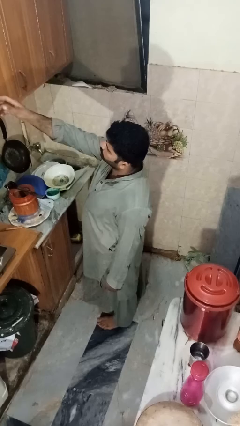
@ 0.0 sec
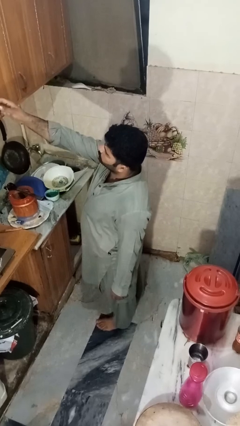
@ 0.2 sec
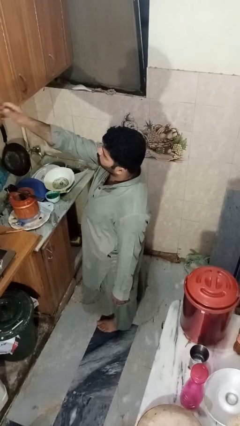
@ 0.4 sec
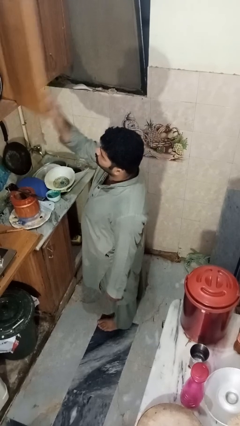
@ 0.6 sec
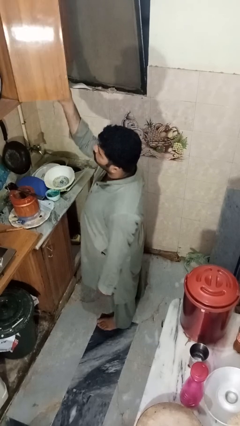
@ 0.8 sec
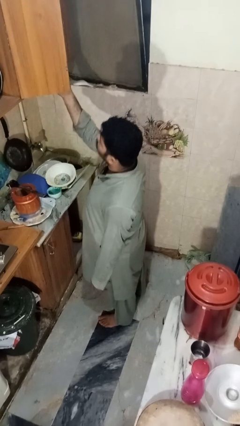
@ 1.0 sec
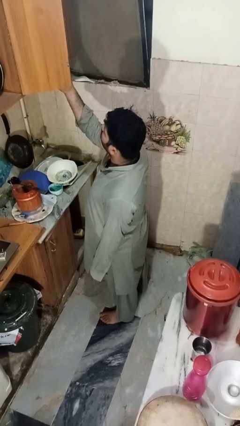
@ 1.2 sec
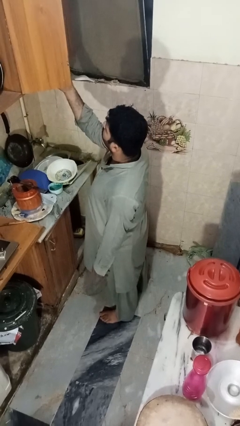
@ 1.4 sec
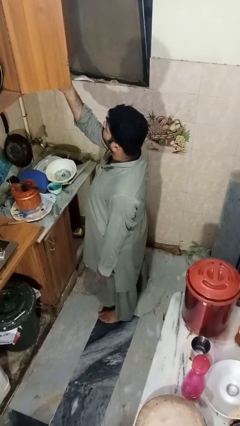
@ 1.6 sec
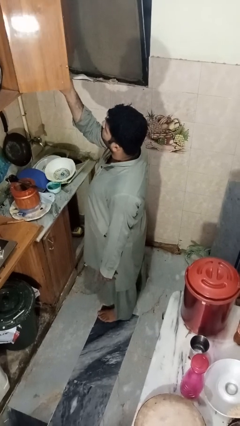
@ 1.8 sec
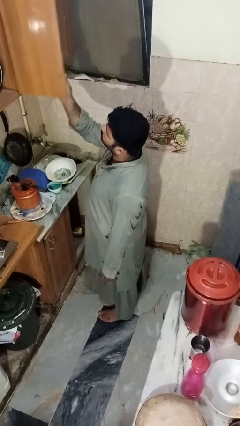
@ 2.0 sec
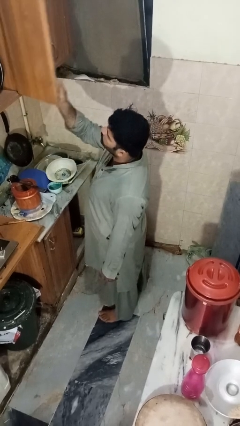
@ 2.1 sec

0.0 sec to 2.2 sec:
person opens cabinet

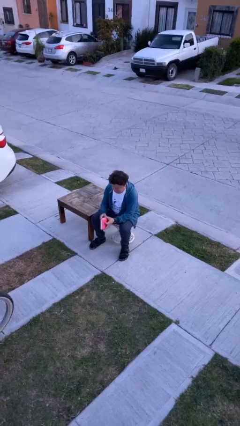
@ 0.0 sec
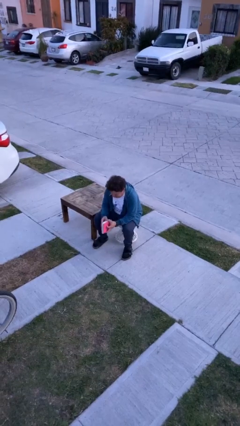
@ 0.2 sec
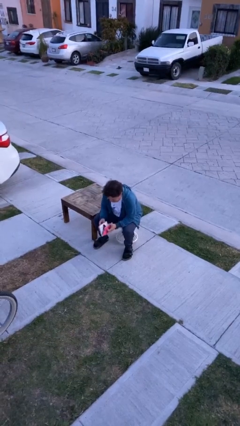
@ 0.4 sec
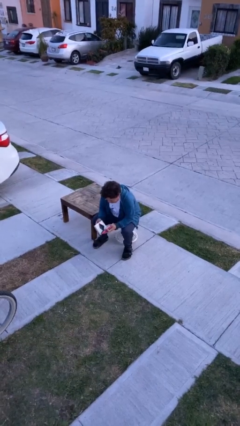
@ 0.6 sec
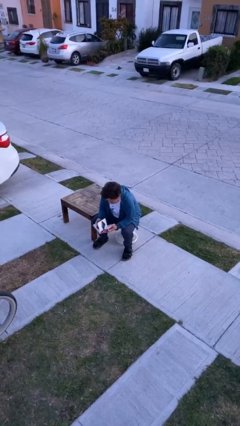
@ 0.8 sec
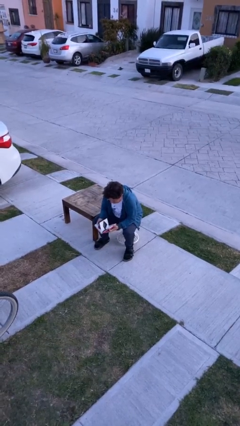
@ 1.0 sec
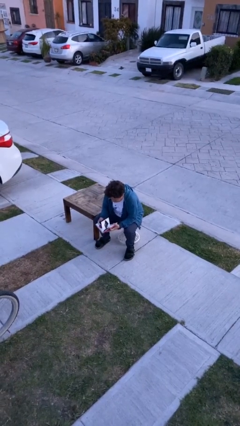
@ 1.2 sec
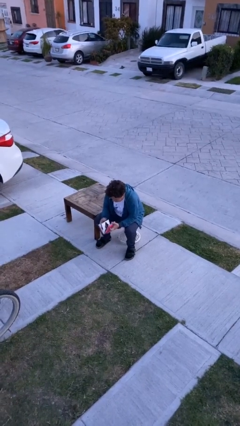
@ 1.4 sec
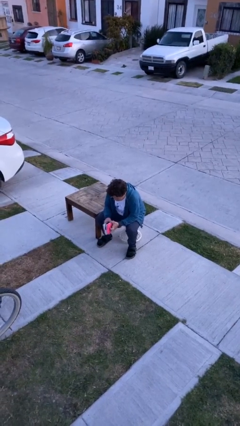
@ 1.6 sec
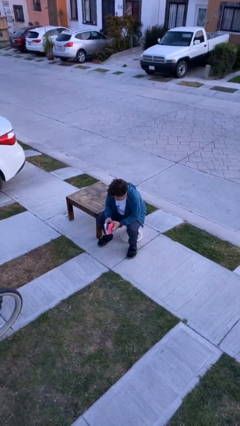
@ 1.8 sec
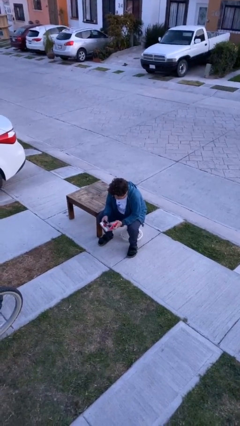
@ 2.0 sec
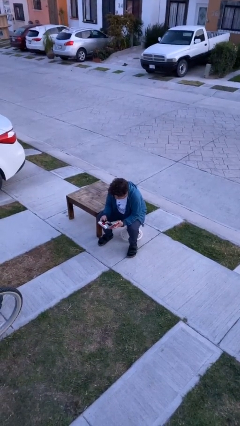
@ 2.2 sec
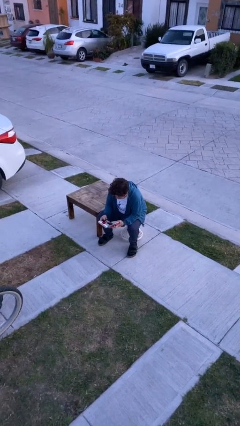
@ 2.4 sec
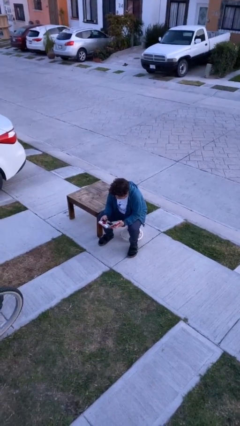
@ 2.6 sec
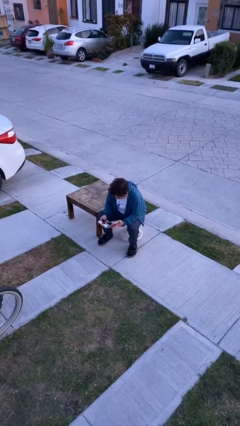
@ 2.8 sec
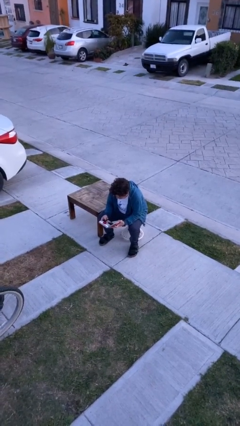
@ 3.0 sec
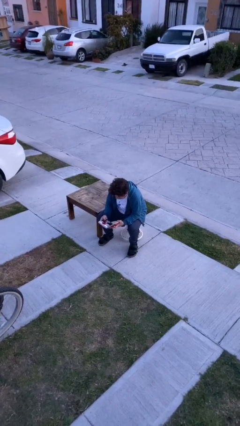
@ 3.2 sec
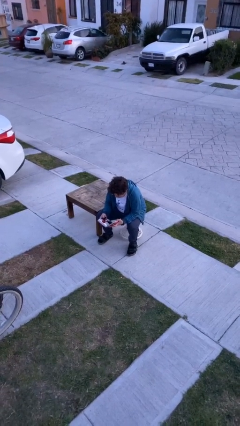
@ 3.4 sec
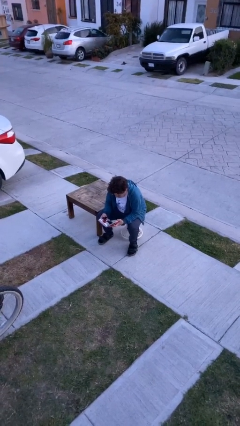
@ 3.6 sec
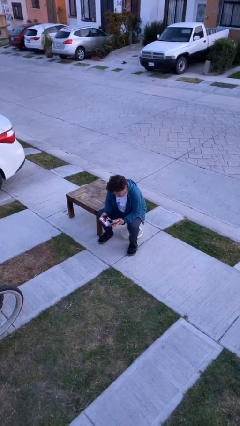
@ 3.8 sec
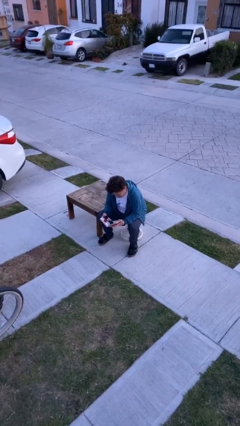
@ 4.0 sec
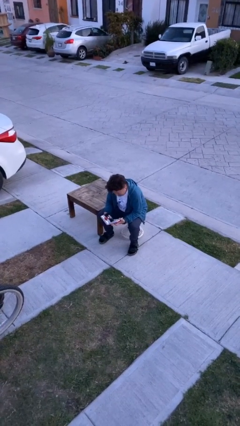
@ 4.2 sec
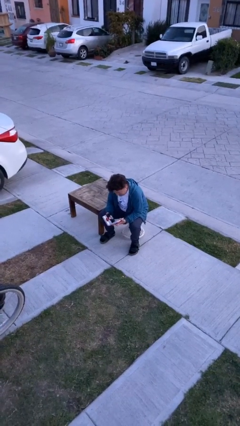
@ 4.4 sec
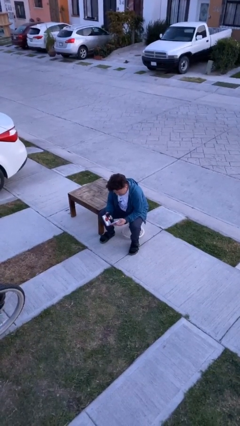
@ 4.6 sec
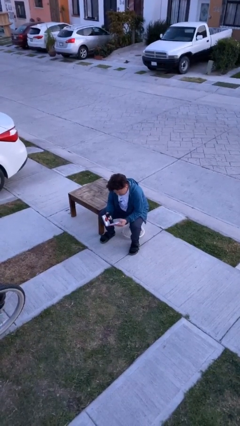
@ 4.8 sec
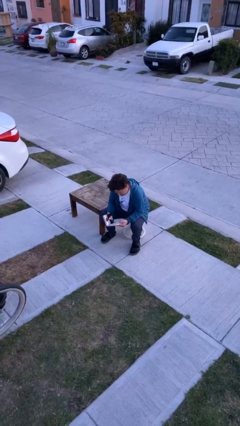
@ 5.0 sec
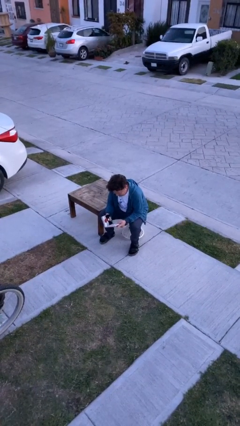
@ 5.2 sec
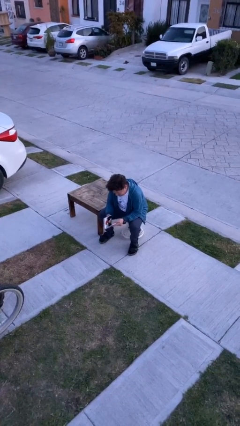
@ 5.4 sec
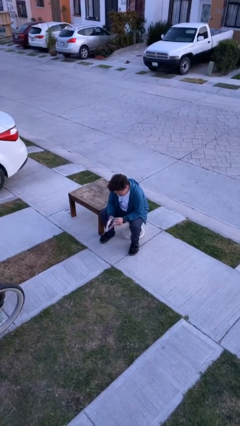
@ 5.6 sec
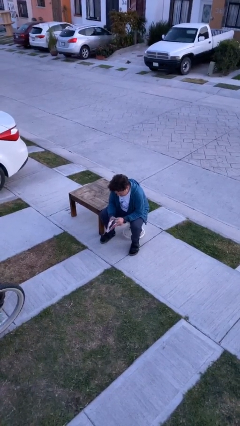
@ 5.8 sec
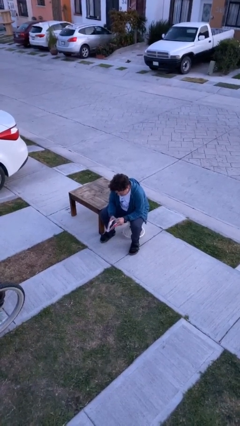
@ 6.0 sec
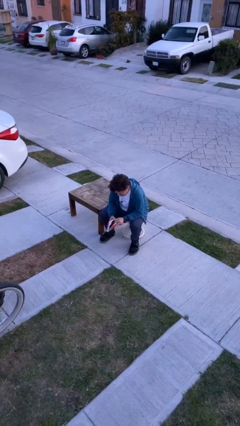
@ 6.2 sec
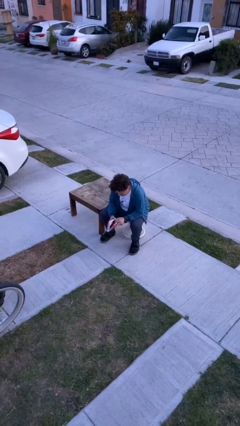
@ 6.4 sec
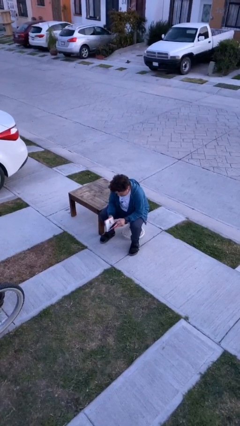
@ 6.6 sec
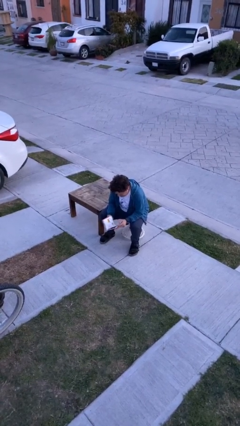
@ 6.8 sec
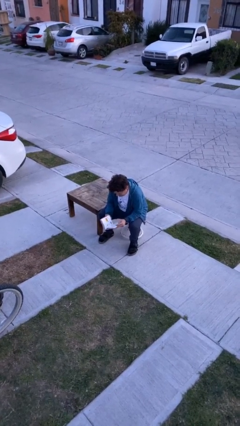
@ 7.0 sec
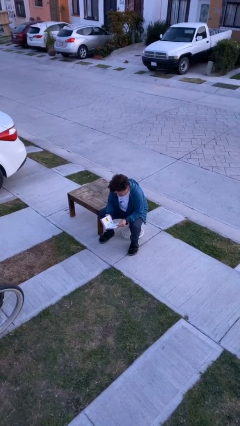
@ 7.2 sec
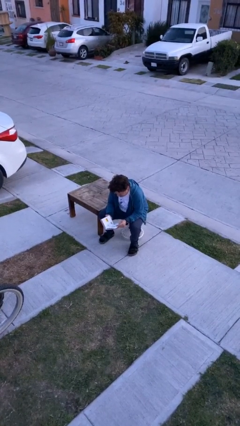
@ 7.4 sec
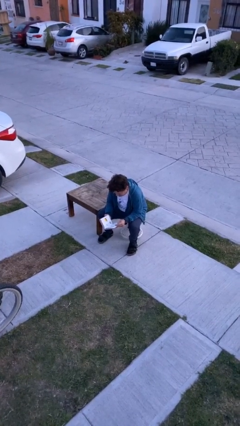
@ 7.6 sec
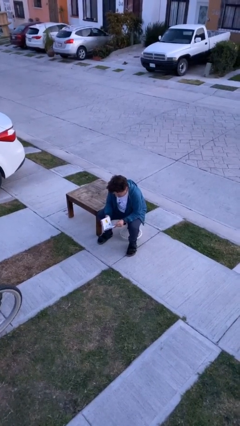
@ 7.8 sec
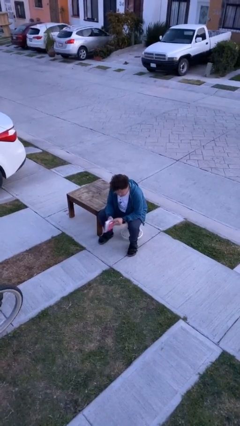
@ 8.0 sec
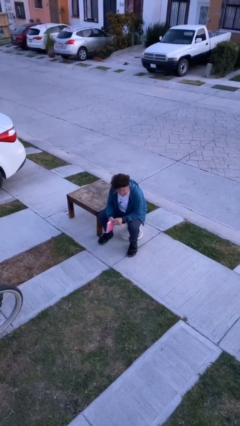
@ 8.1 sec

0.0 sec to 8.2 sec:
person reads document

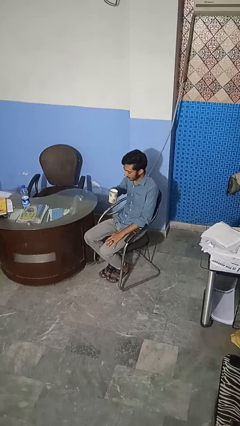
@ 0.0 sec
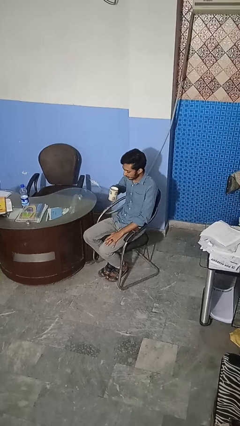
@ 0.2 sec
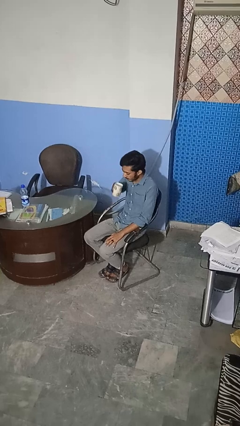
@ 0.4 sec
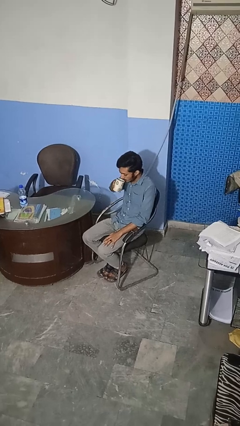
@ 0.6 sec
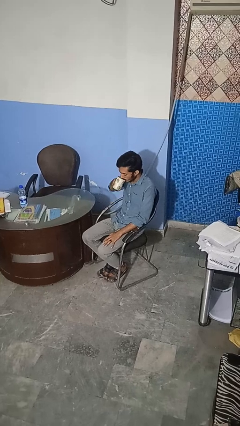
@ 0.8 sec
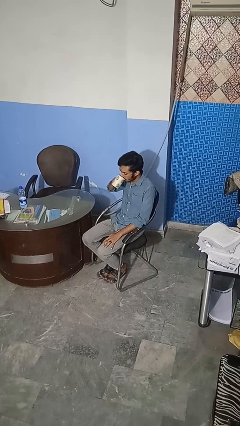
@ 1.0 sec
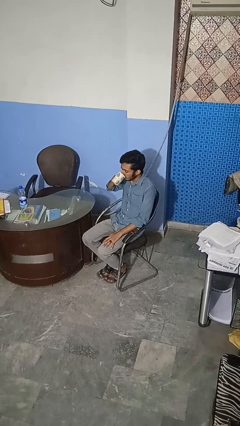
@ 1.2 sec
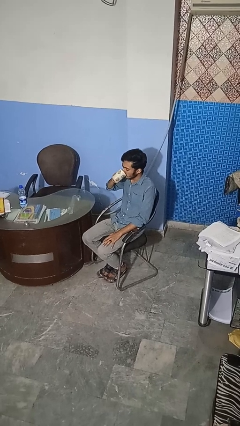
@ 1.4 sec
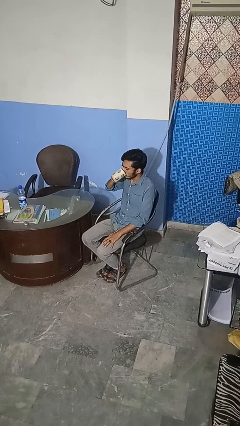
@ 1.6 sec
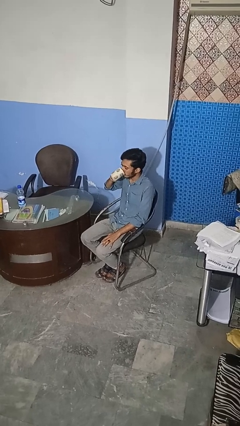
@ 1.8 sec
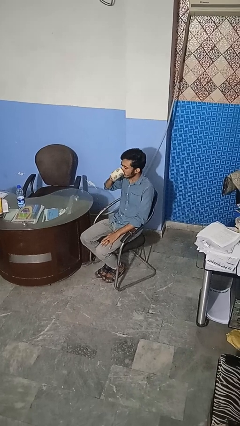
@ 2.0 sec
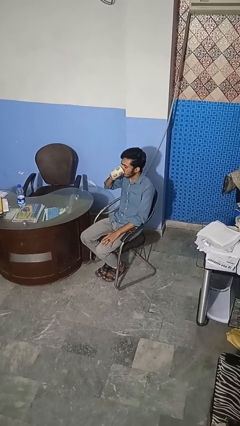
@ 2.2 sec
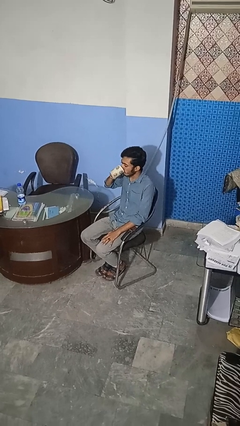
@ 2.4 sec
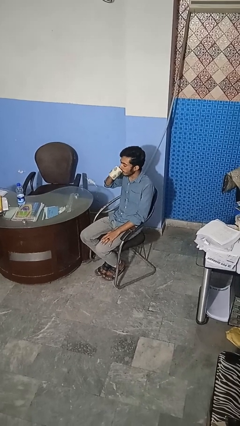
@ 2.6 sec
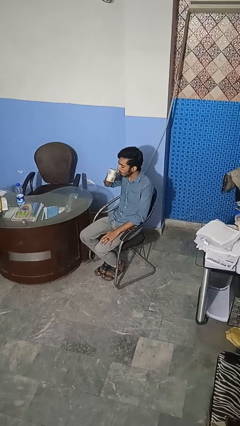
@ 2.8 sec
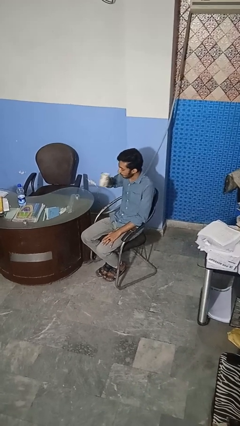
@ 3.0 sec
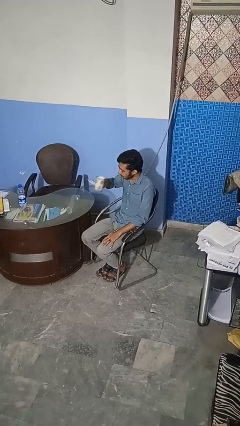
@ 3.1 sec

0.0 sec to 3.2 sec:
person drinks from mug

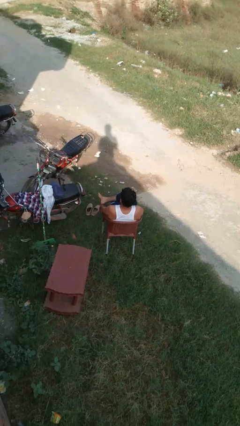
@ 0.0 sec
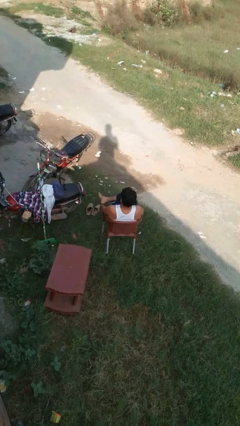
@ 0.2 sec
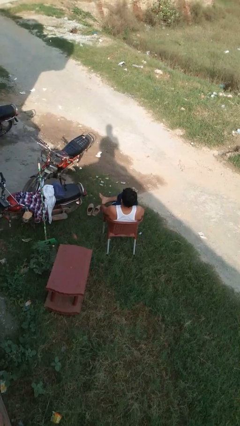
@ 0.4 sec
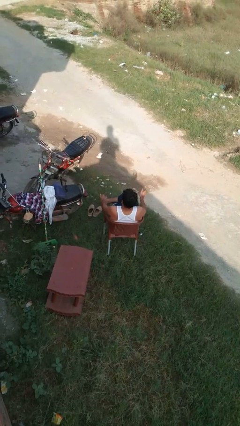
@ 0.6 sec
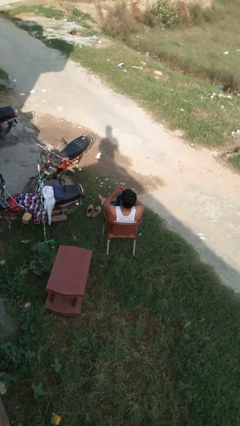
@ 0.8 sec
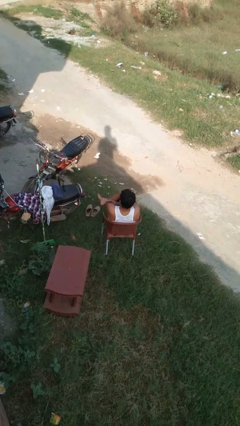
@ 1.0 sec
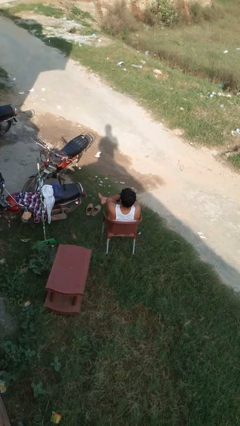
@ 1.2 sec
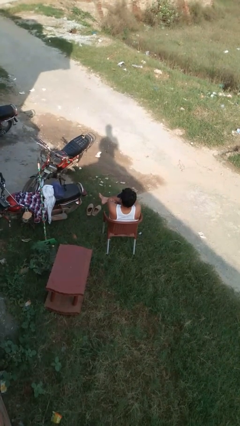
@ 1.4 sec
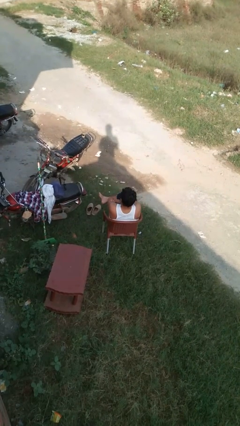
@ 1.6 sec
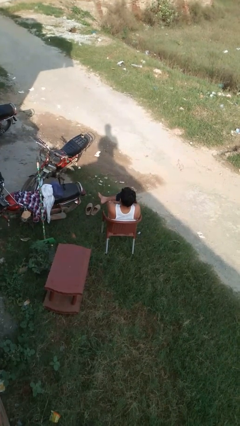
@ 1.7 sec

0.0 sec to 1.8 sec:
person crosses arms

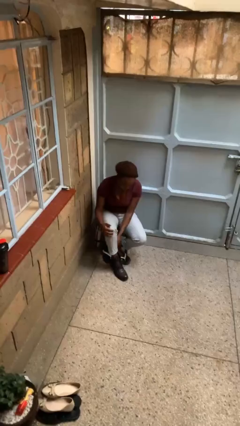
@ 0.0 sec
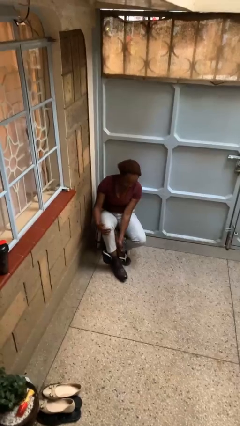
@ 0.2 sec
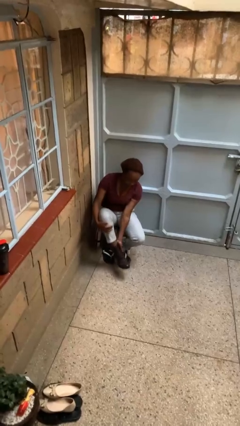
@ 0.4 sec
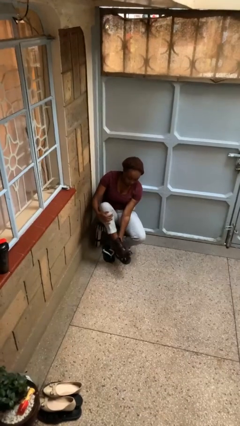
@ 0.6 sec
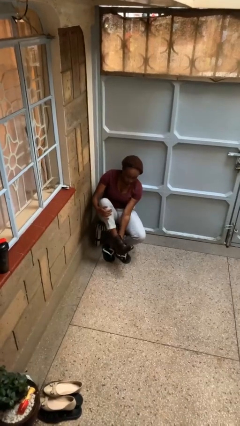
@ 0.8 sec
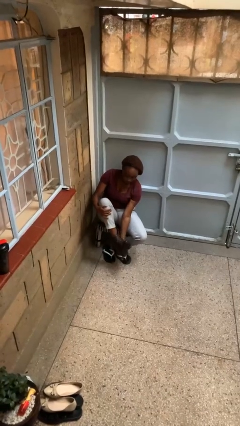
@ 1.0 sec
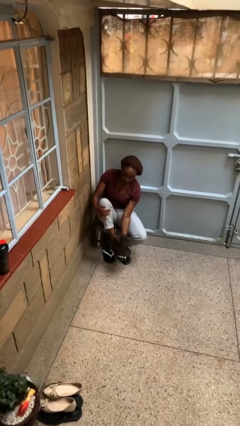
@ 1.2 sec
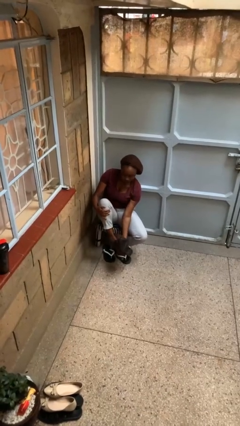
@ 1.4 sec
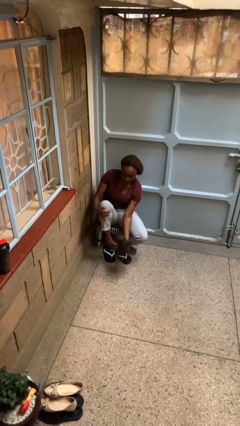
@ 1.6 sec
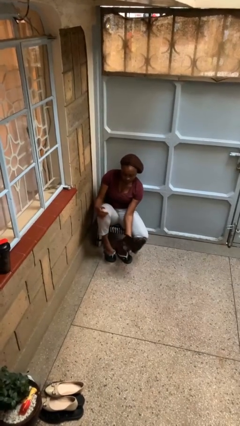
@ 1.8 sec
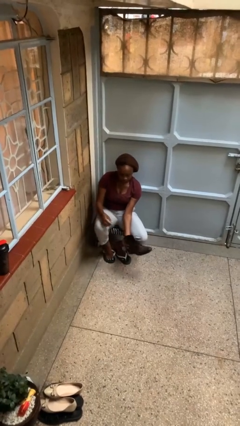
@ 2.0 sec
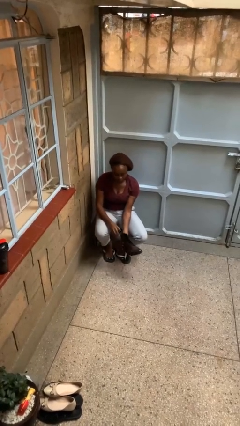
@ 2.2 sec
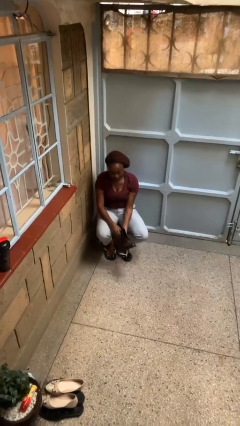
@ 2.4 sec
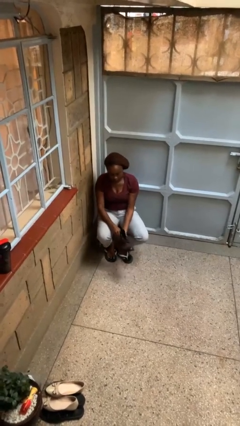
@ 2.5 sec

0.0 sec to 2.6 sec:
person takes off boots
